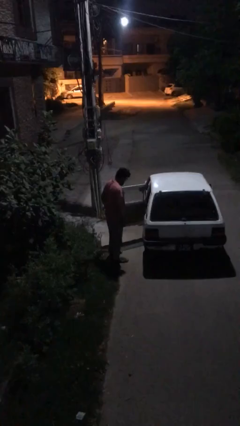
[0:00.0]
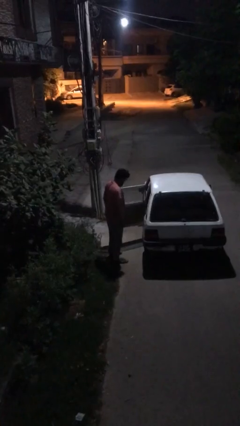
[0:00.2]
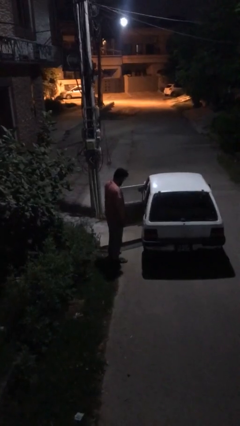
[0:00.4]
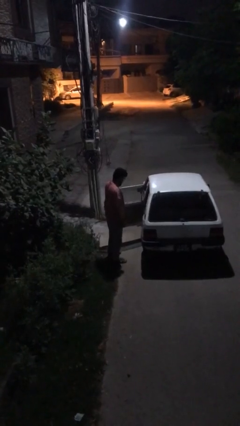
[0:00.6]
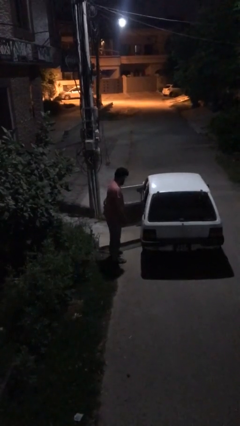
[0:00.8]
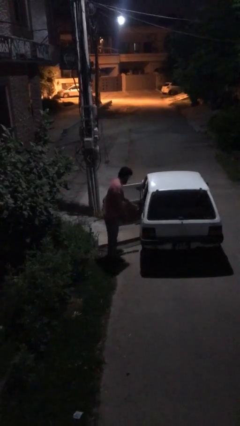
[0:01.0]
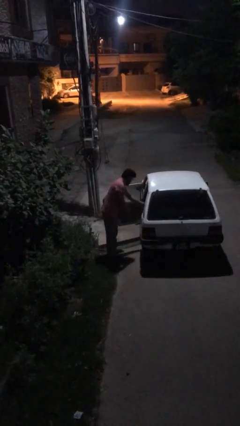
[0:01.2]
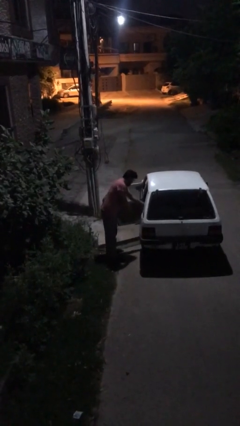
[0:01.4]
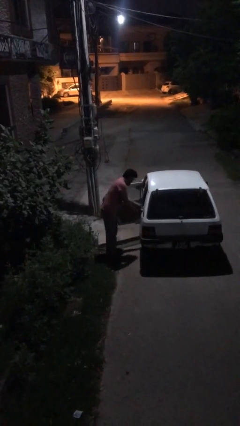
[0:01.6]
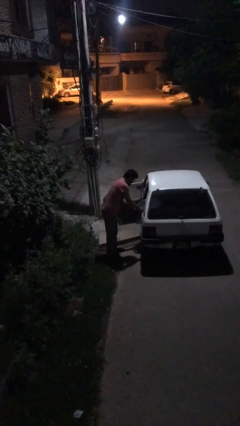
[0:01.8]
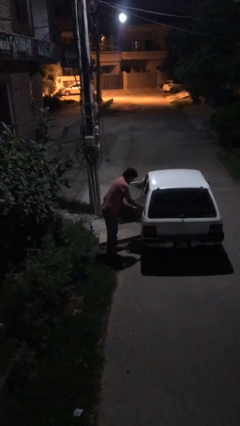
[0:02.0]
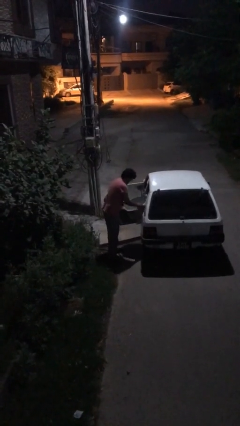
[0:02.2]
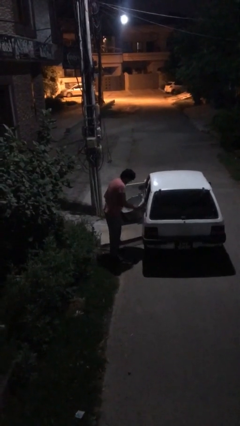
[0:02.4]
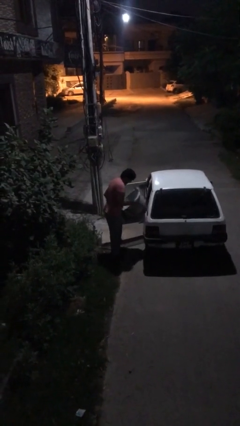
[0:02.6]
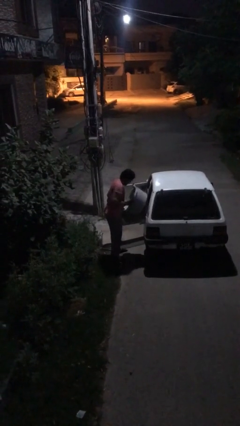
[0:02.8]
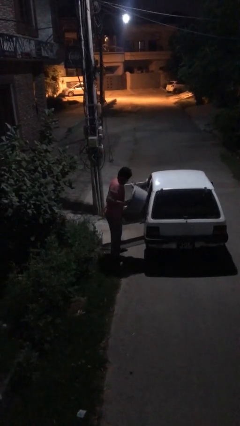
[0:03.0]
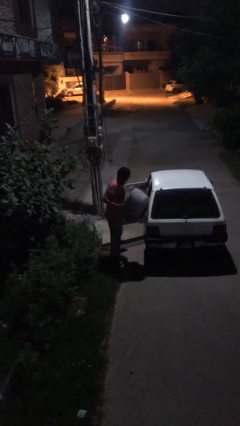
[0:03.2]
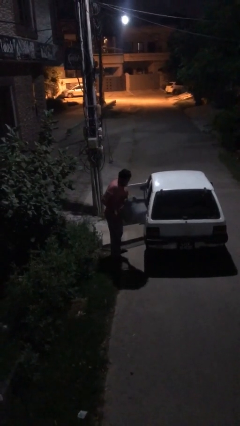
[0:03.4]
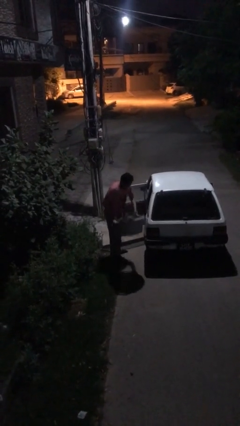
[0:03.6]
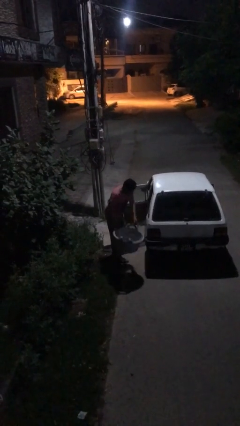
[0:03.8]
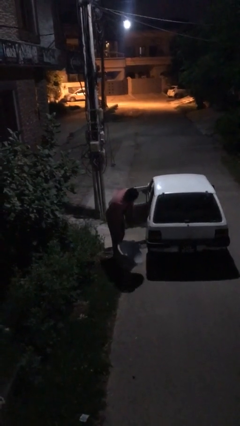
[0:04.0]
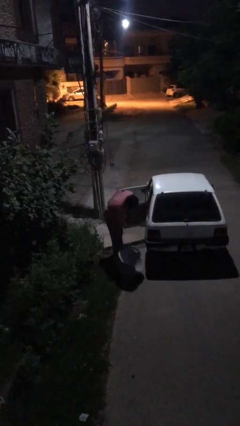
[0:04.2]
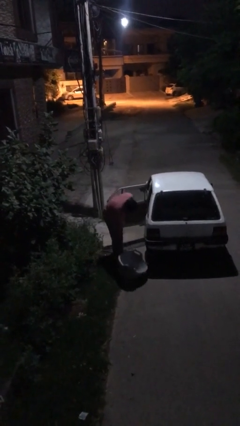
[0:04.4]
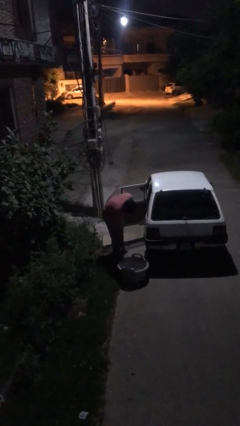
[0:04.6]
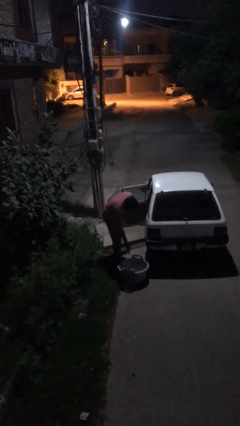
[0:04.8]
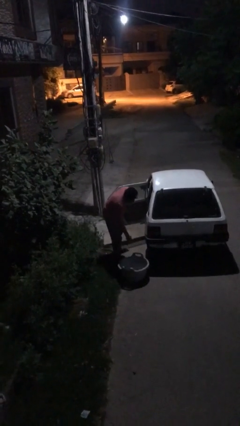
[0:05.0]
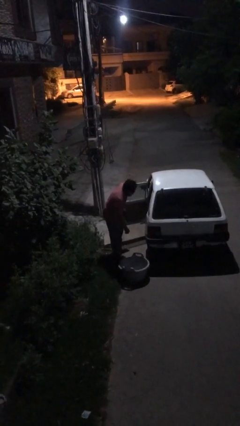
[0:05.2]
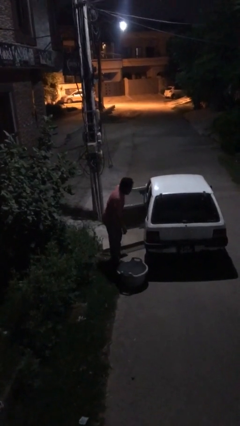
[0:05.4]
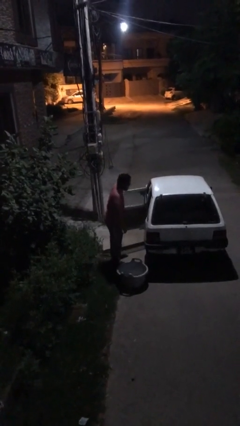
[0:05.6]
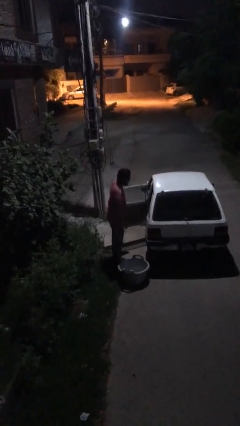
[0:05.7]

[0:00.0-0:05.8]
person unloads car

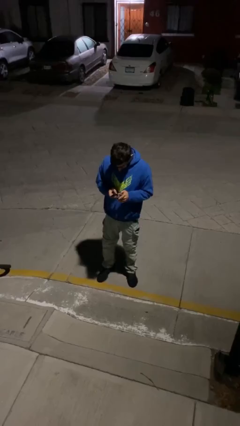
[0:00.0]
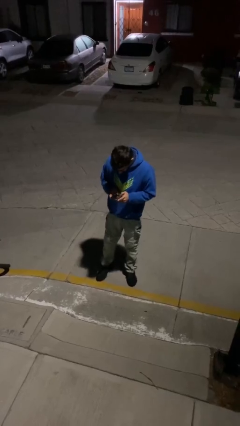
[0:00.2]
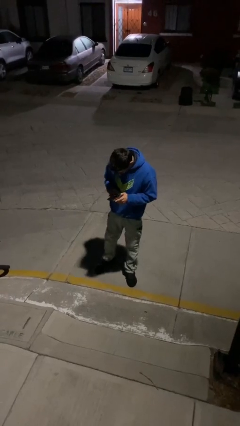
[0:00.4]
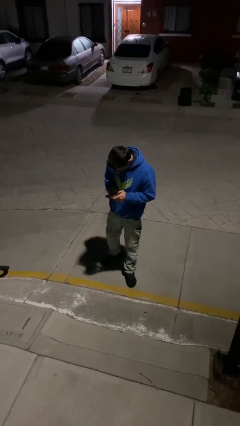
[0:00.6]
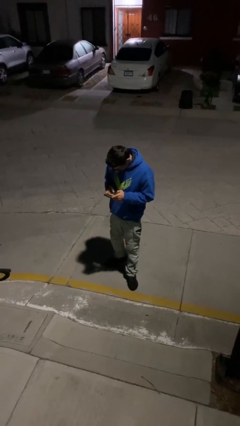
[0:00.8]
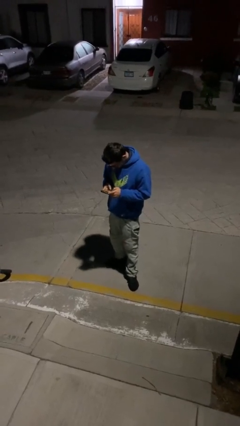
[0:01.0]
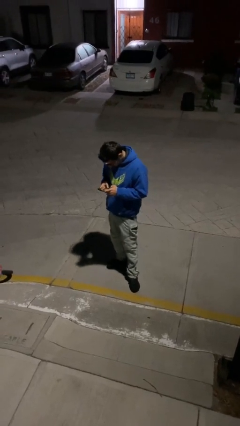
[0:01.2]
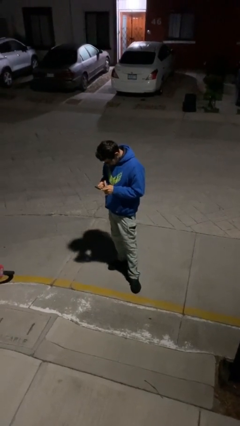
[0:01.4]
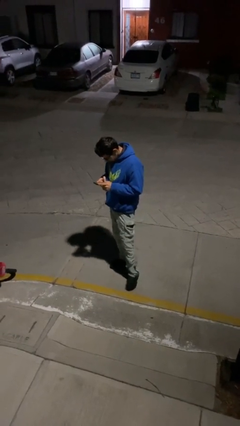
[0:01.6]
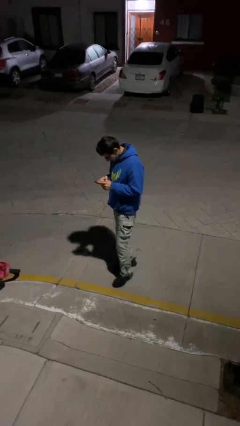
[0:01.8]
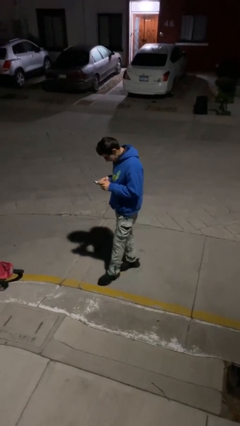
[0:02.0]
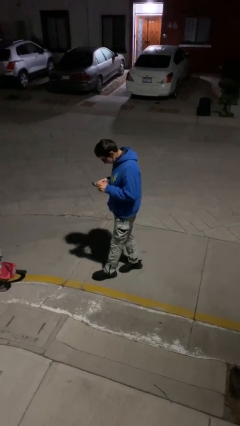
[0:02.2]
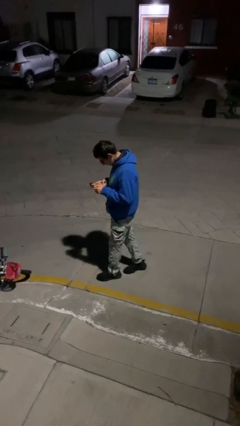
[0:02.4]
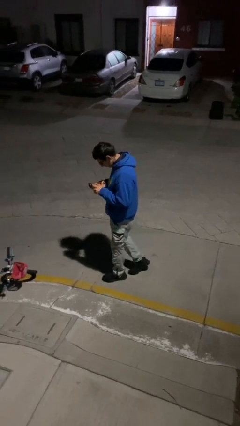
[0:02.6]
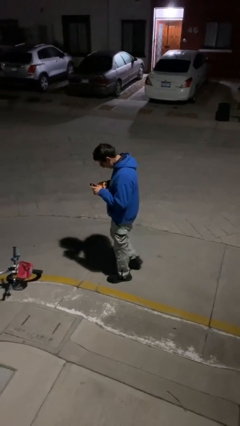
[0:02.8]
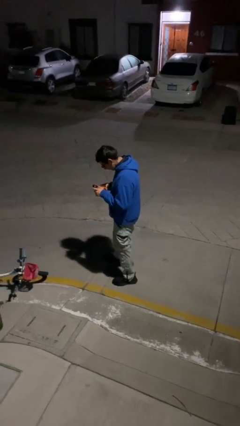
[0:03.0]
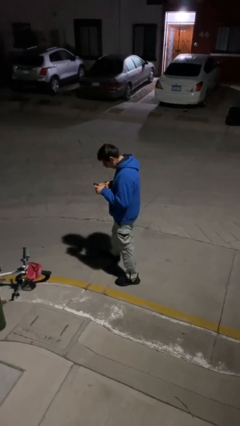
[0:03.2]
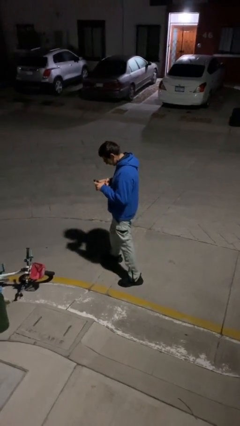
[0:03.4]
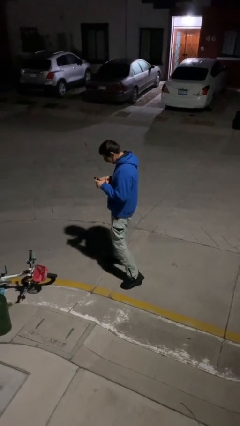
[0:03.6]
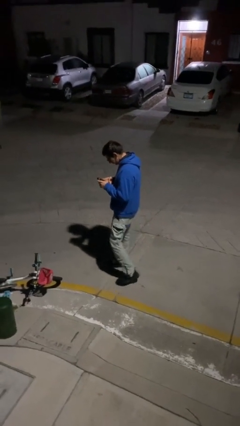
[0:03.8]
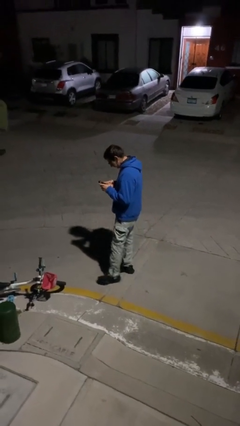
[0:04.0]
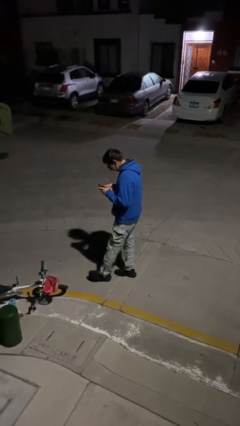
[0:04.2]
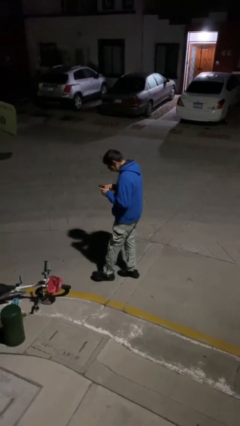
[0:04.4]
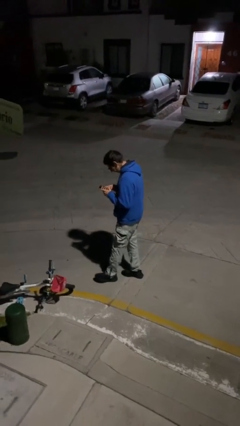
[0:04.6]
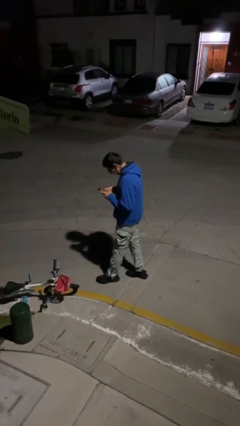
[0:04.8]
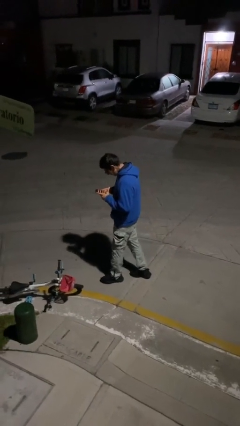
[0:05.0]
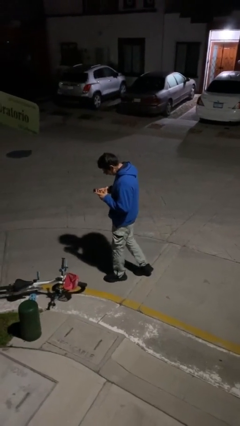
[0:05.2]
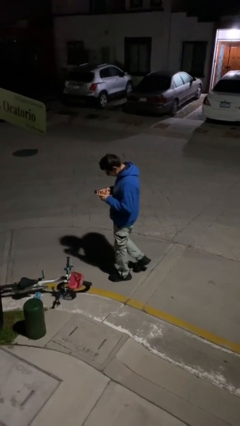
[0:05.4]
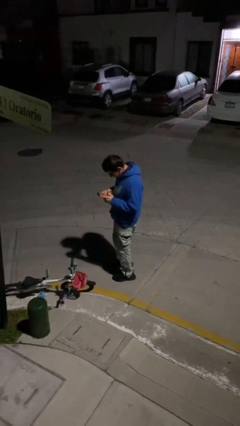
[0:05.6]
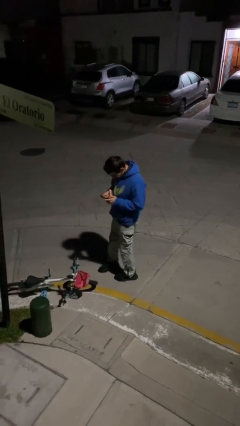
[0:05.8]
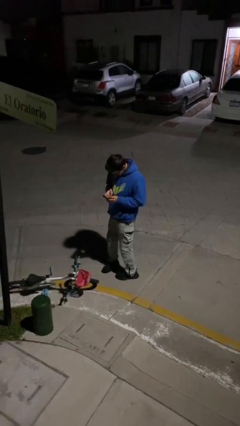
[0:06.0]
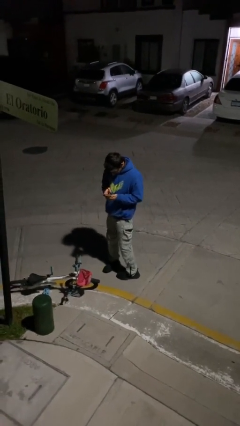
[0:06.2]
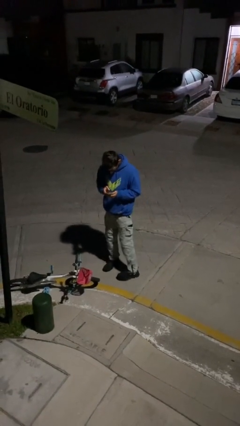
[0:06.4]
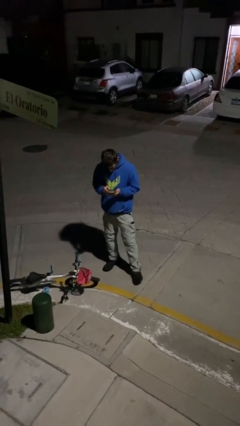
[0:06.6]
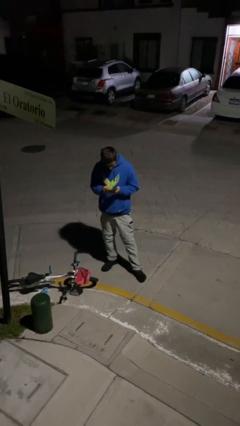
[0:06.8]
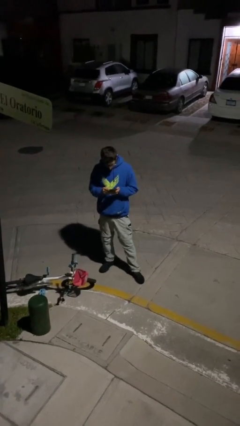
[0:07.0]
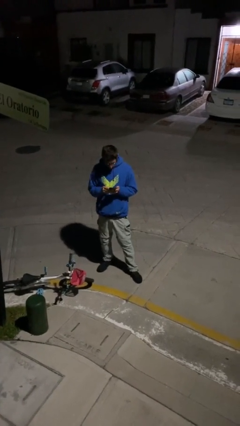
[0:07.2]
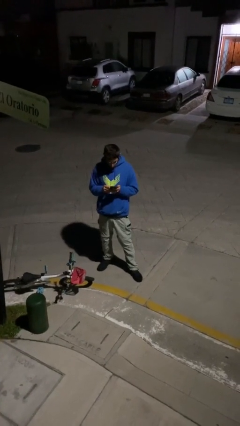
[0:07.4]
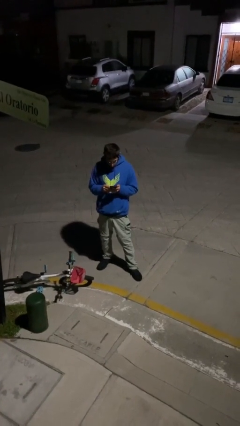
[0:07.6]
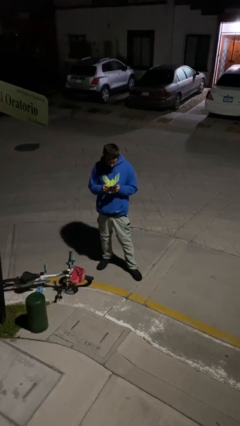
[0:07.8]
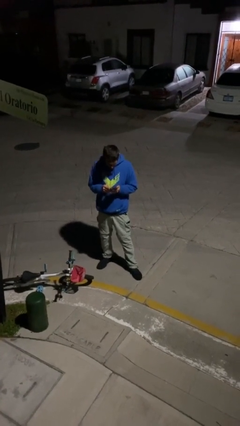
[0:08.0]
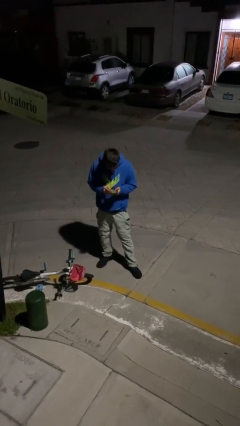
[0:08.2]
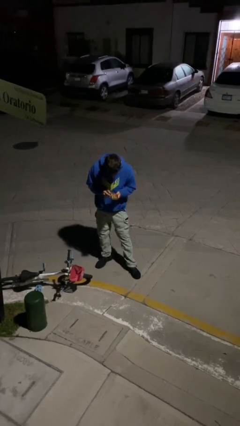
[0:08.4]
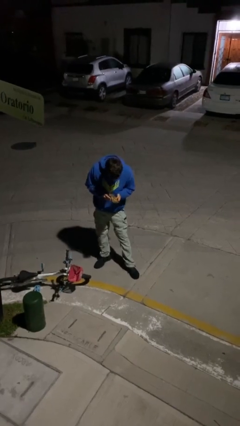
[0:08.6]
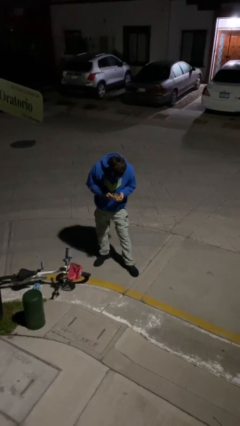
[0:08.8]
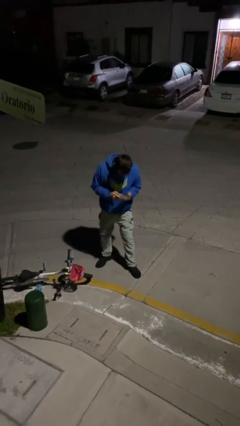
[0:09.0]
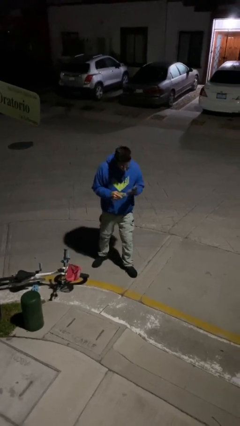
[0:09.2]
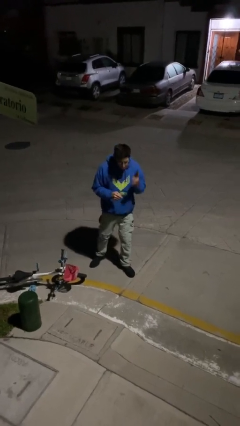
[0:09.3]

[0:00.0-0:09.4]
person texts on phone

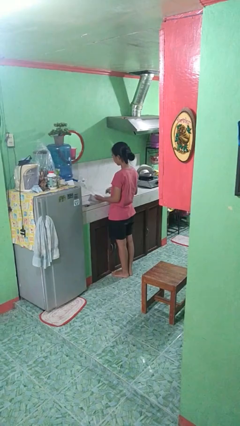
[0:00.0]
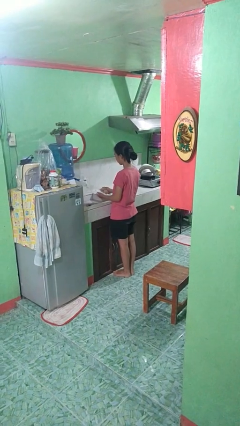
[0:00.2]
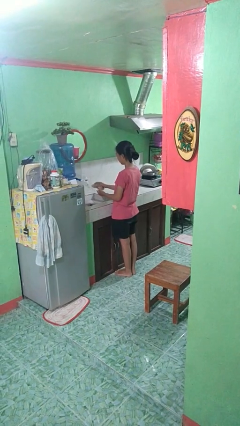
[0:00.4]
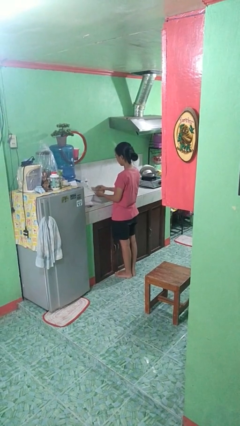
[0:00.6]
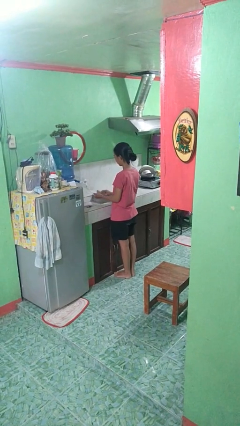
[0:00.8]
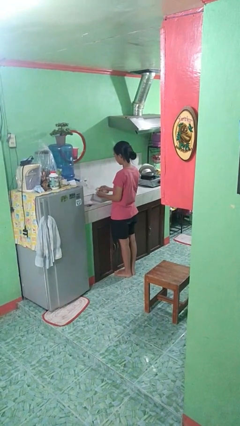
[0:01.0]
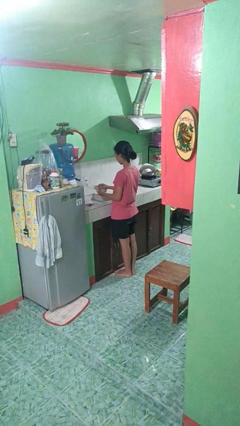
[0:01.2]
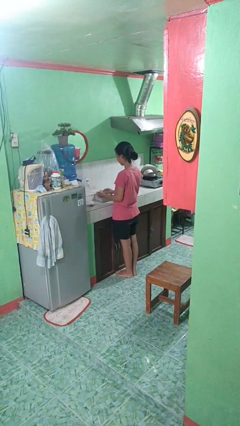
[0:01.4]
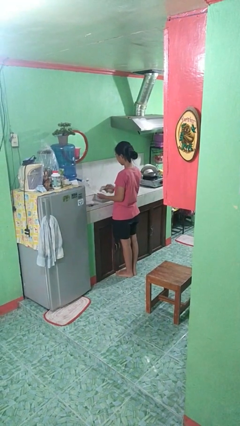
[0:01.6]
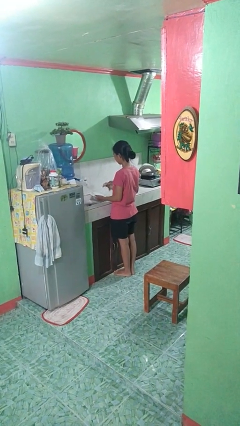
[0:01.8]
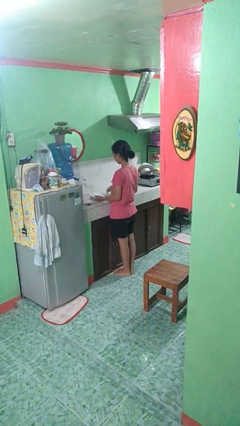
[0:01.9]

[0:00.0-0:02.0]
person dries dish

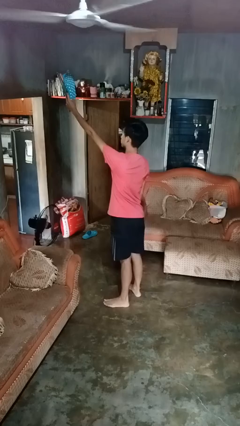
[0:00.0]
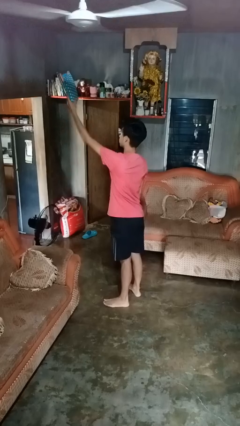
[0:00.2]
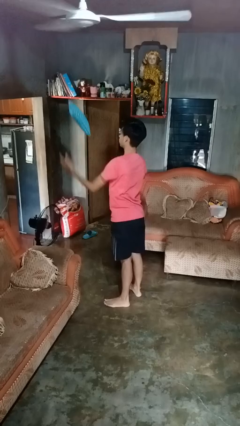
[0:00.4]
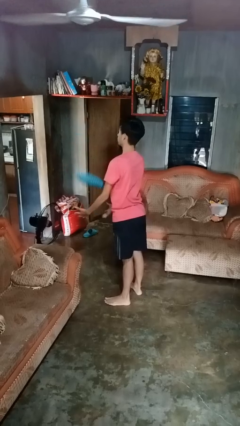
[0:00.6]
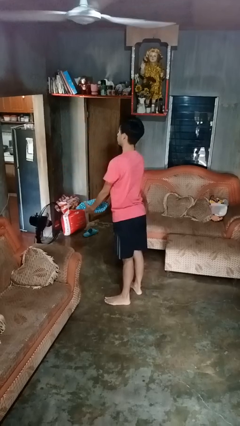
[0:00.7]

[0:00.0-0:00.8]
person drops object
